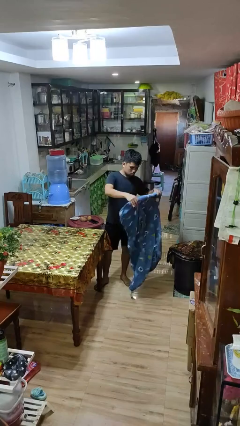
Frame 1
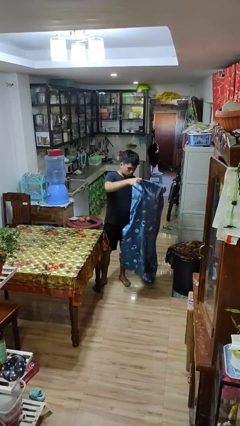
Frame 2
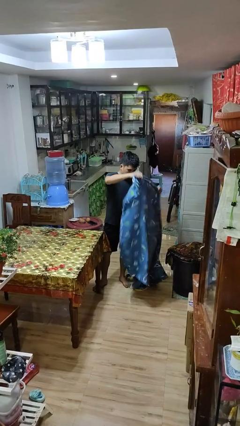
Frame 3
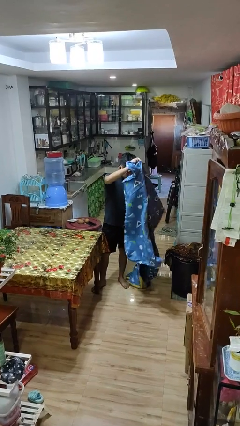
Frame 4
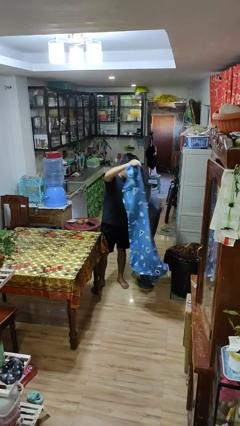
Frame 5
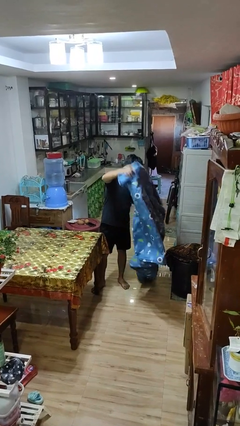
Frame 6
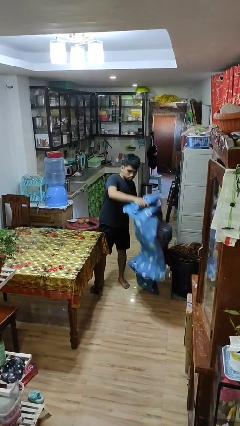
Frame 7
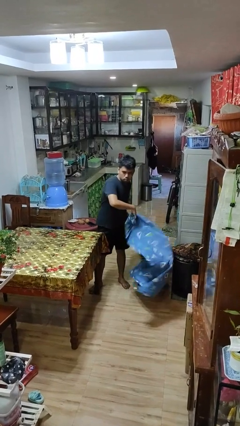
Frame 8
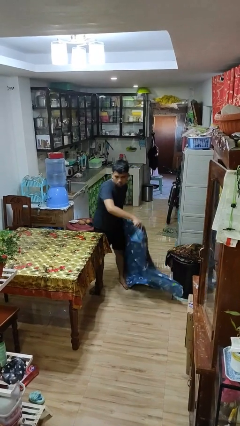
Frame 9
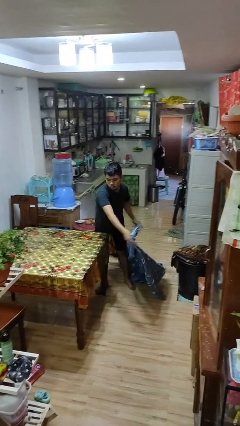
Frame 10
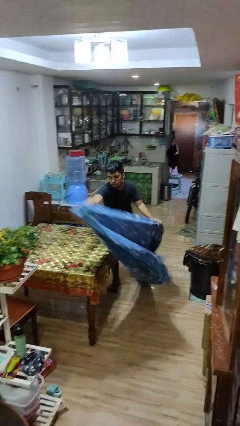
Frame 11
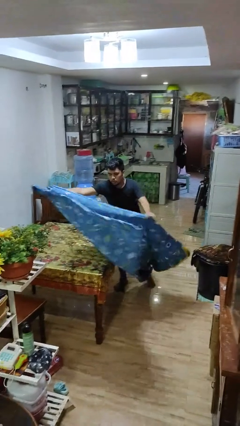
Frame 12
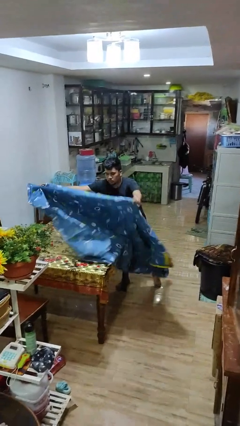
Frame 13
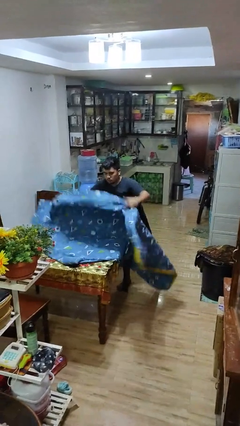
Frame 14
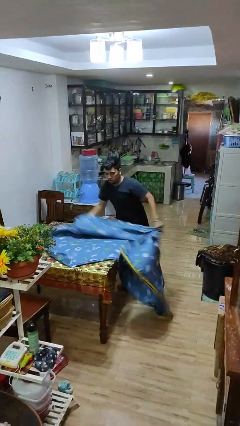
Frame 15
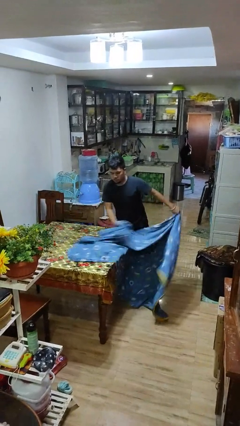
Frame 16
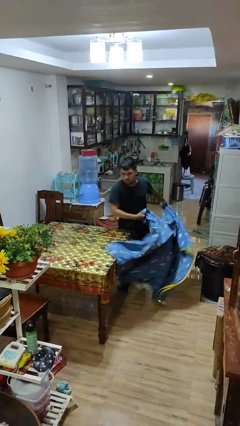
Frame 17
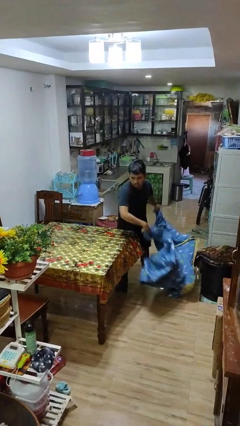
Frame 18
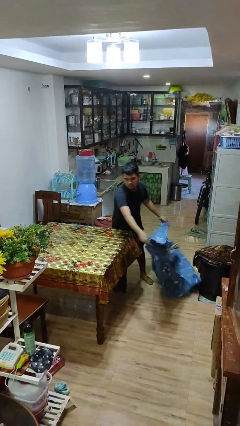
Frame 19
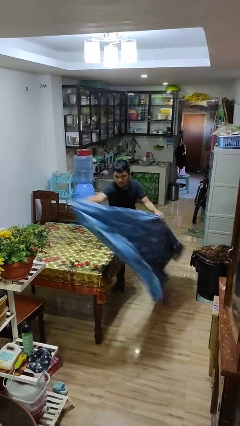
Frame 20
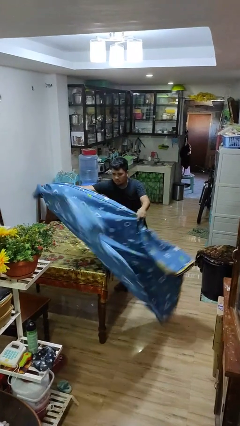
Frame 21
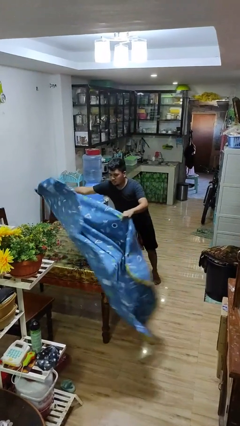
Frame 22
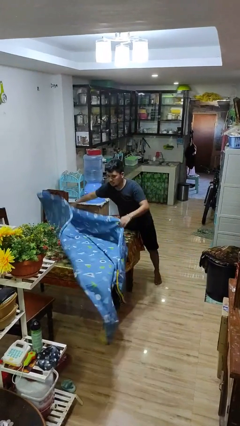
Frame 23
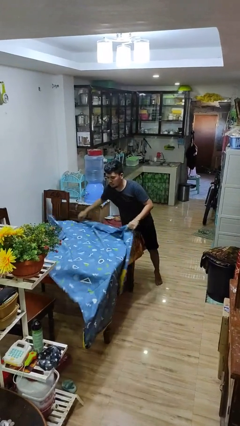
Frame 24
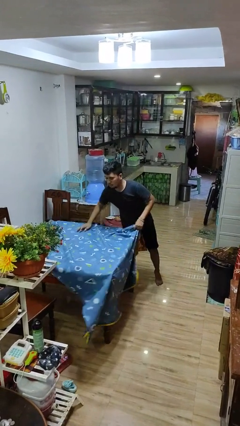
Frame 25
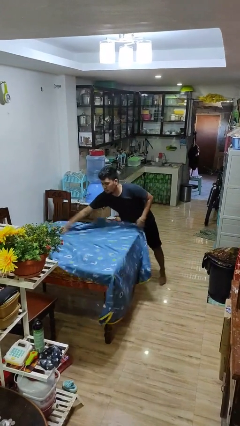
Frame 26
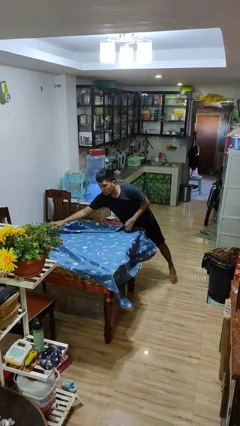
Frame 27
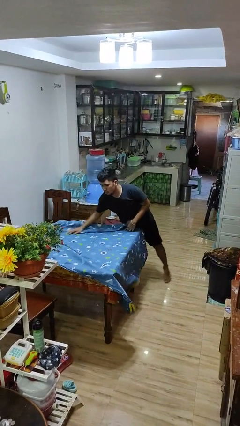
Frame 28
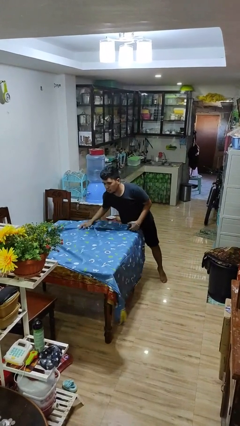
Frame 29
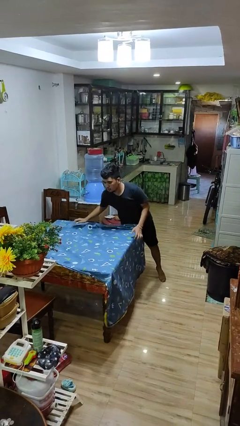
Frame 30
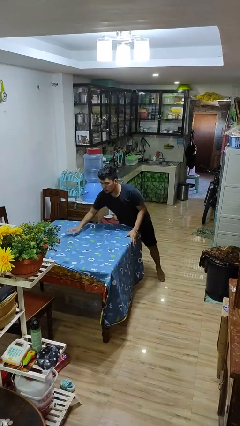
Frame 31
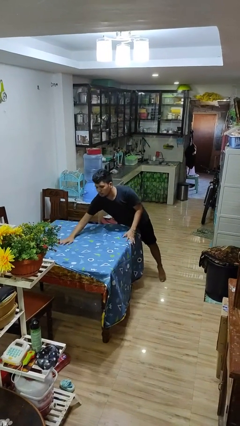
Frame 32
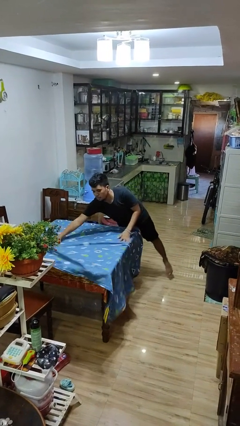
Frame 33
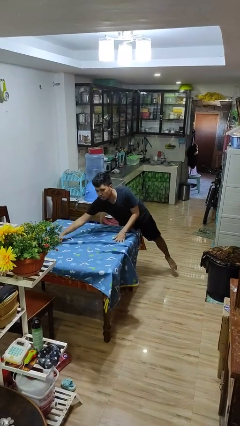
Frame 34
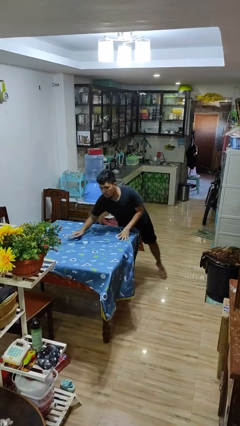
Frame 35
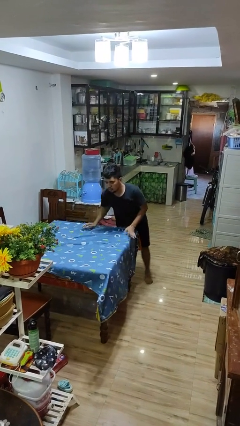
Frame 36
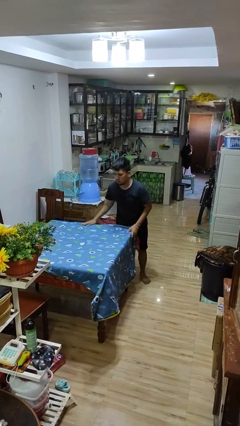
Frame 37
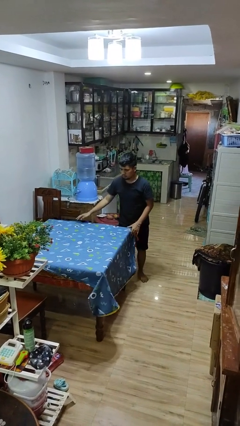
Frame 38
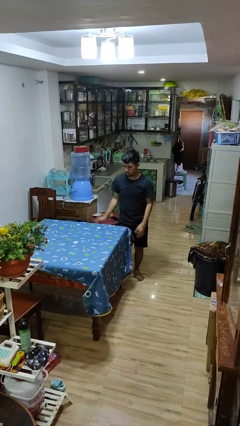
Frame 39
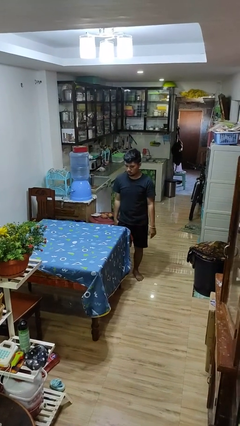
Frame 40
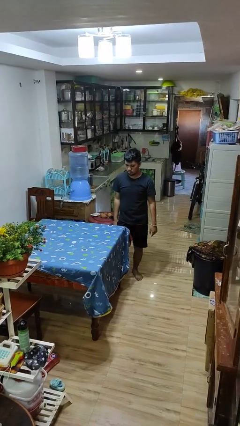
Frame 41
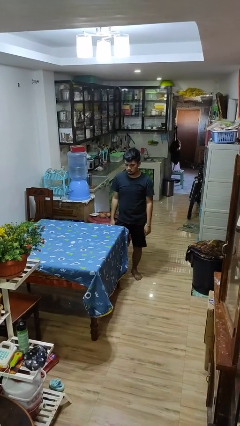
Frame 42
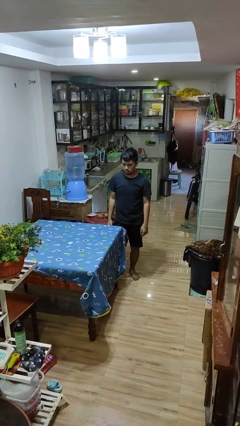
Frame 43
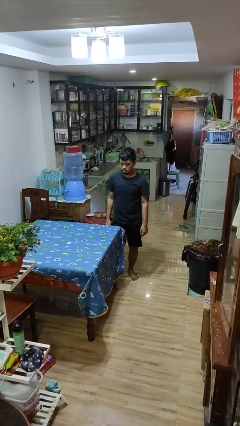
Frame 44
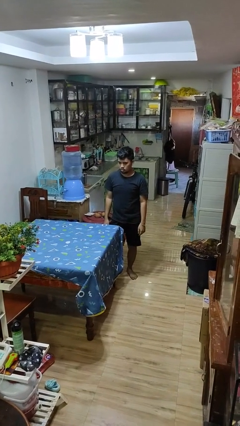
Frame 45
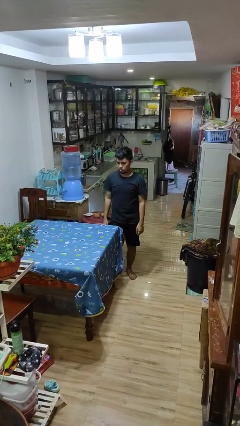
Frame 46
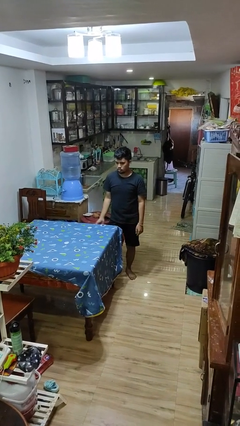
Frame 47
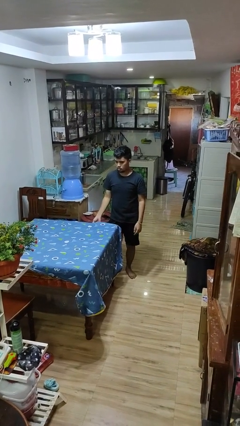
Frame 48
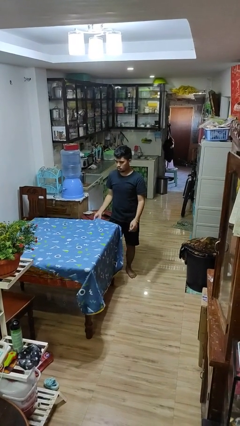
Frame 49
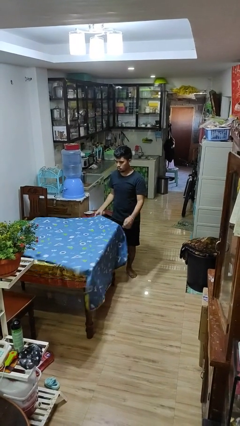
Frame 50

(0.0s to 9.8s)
person spreads tablecloth

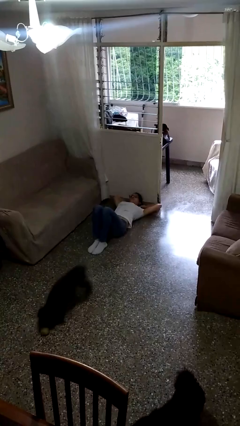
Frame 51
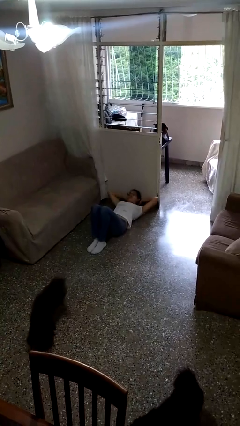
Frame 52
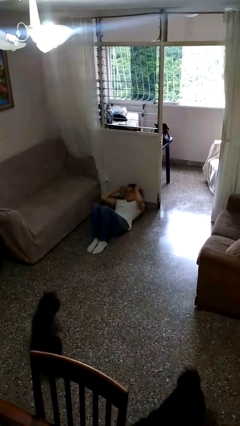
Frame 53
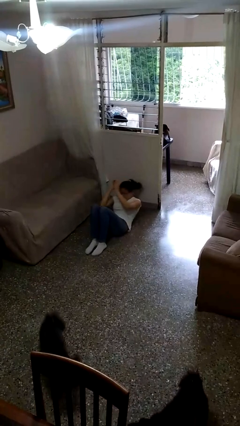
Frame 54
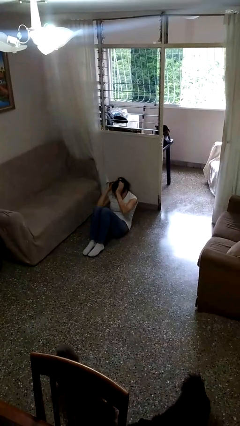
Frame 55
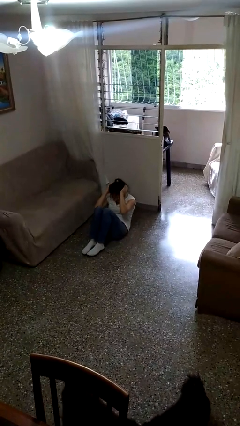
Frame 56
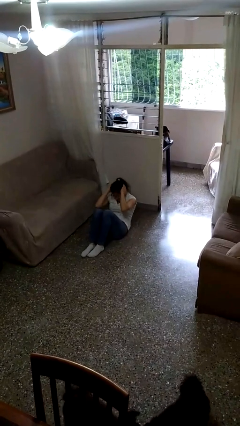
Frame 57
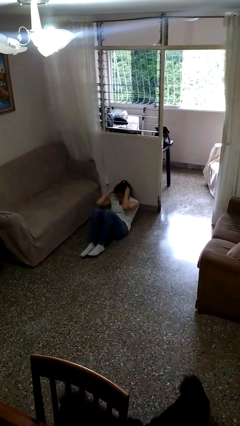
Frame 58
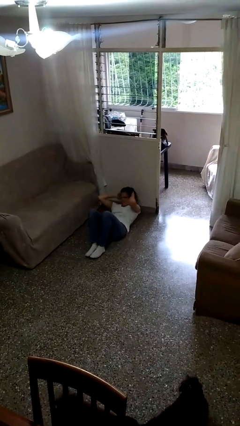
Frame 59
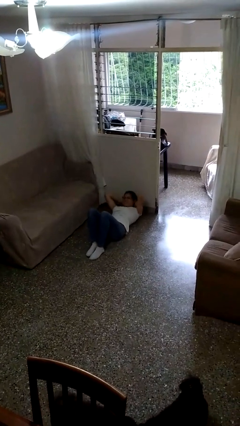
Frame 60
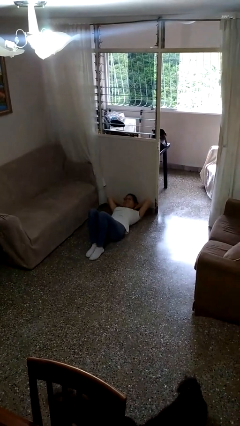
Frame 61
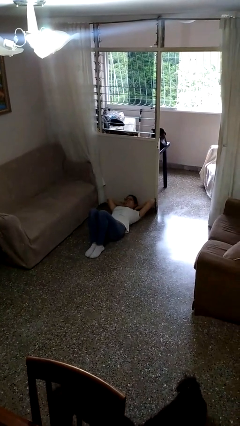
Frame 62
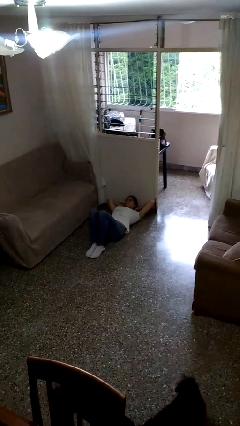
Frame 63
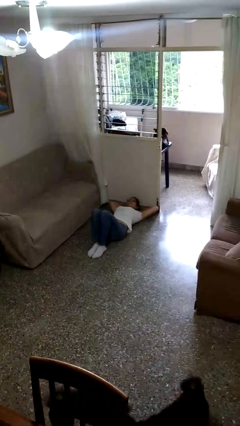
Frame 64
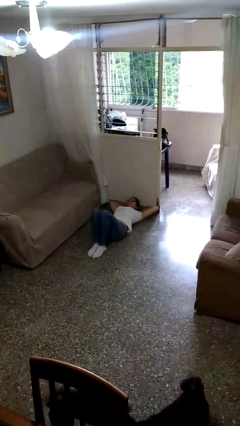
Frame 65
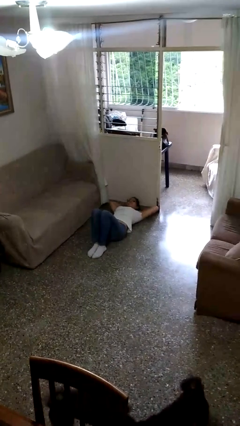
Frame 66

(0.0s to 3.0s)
person exercises with situp

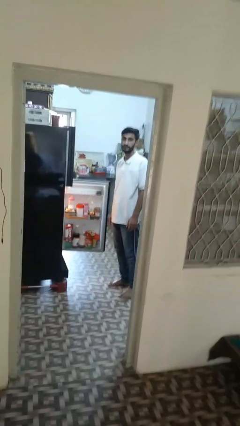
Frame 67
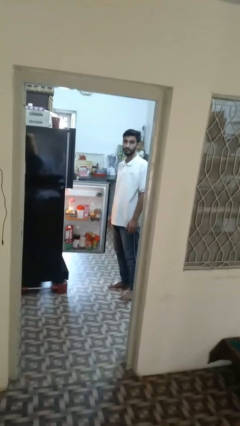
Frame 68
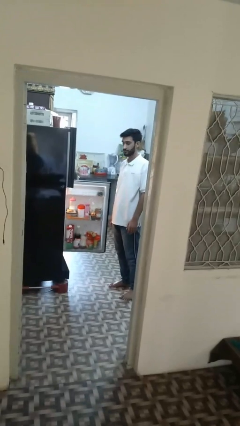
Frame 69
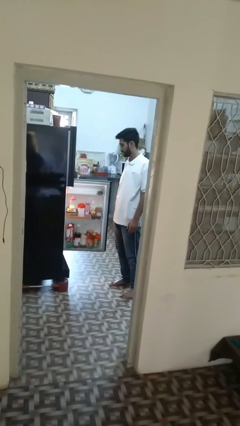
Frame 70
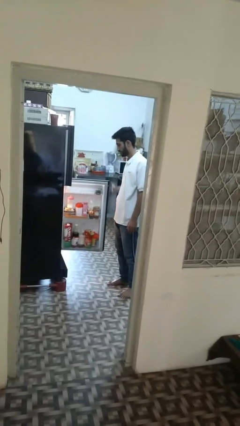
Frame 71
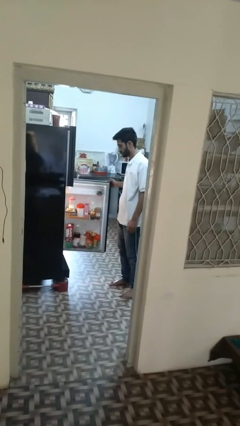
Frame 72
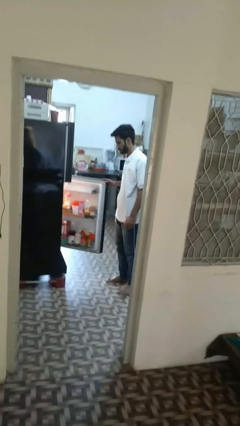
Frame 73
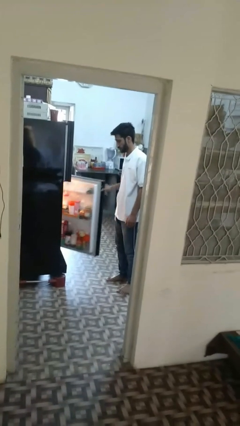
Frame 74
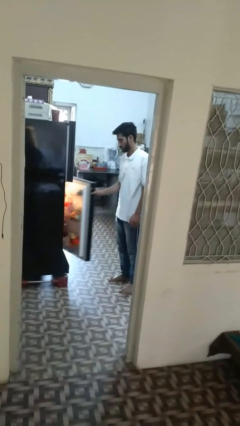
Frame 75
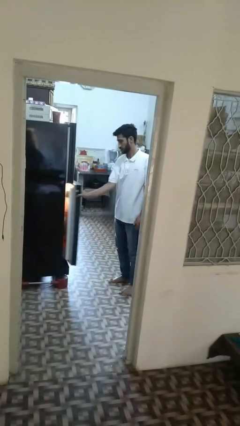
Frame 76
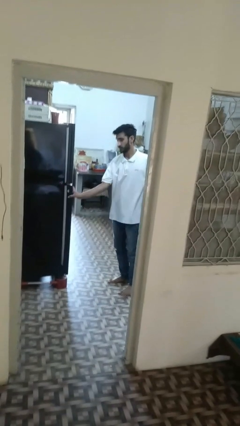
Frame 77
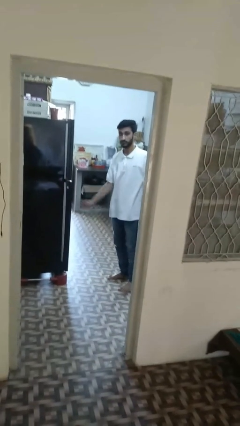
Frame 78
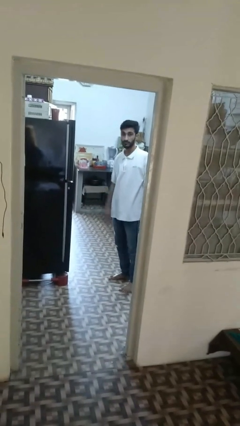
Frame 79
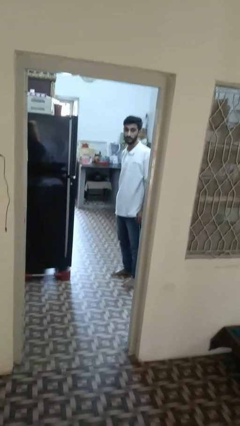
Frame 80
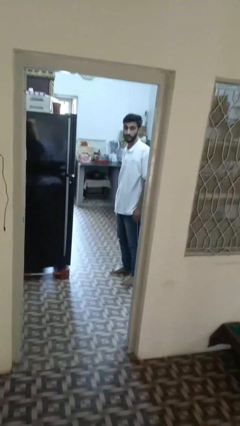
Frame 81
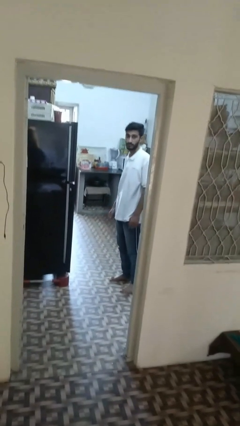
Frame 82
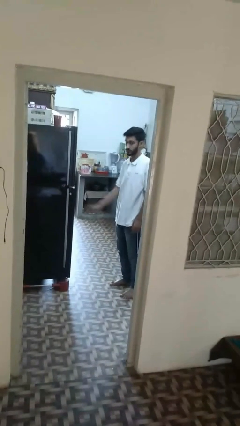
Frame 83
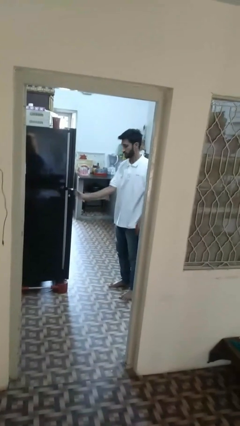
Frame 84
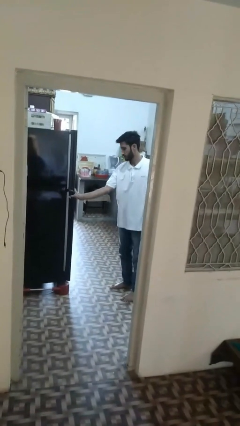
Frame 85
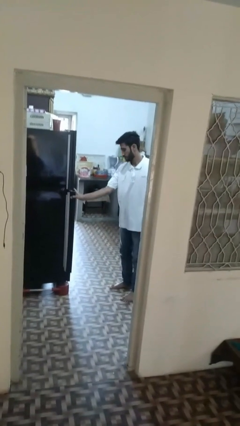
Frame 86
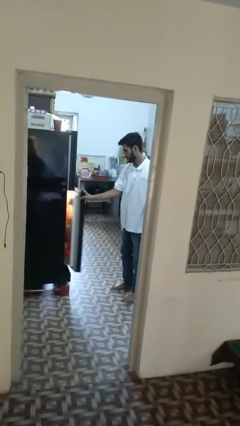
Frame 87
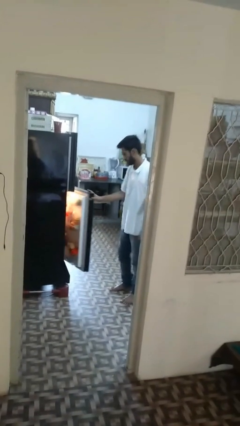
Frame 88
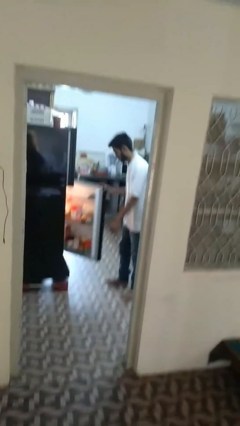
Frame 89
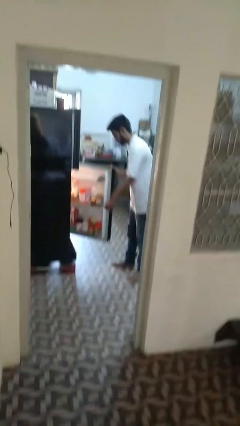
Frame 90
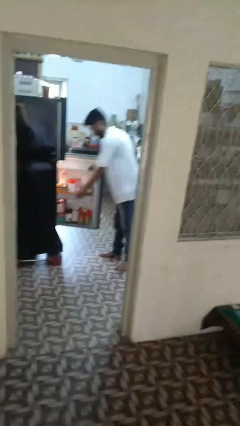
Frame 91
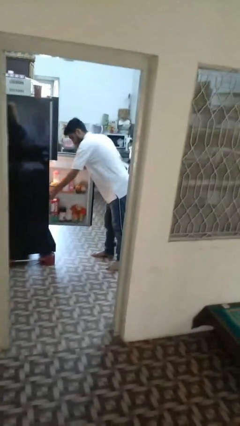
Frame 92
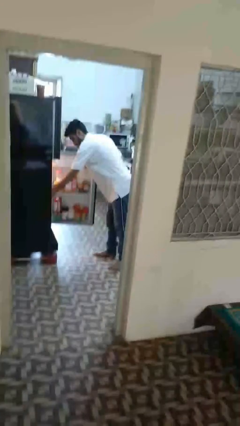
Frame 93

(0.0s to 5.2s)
person closes refrigerator
